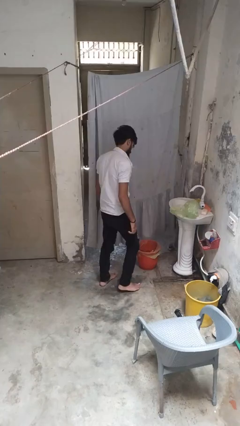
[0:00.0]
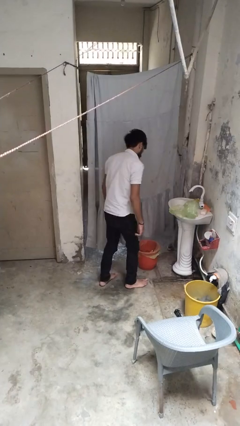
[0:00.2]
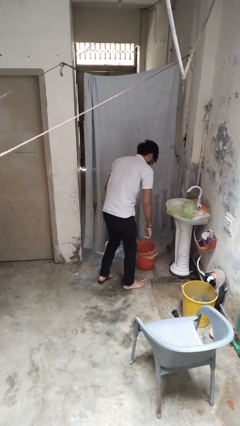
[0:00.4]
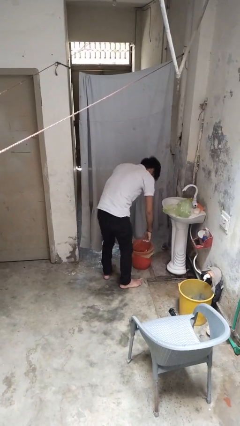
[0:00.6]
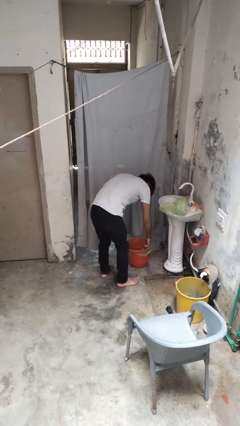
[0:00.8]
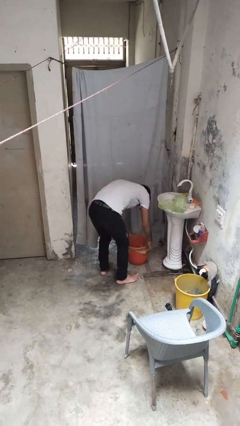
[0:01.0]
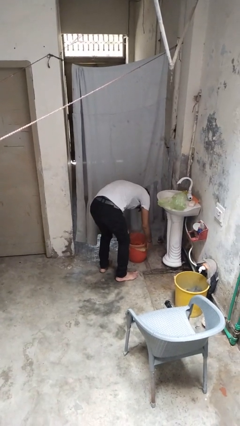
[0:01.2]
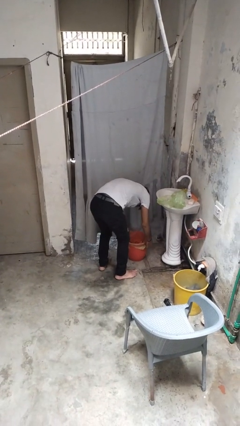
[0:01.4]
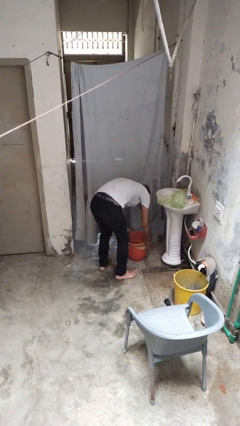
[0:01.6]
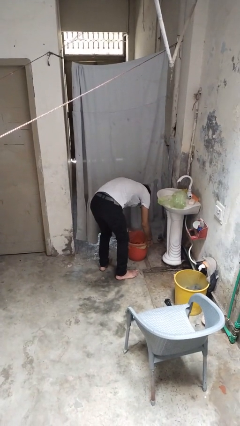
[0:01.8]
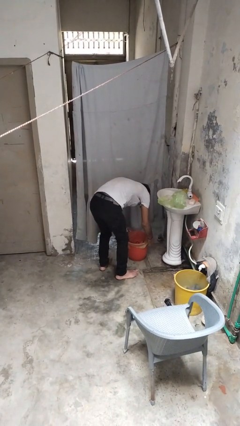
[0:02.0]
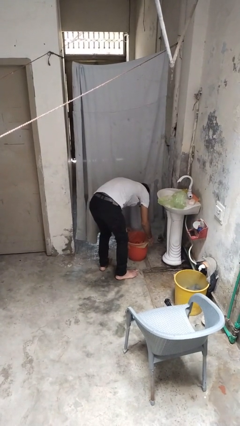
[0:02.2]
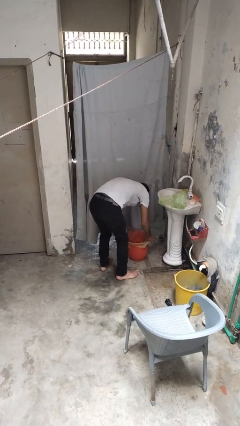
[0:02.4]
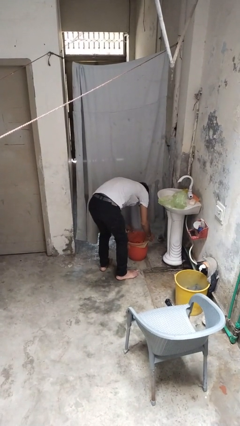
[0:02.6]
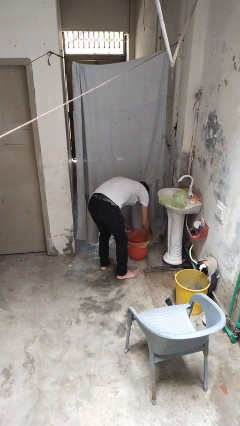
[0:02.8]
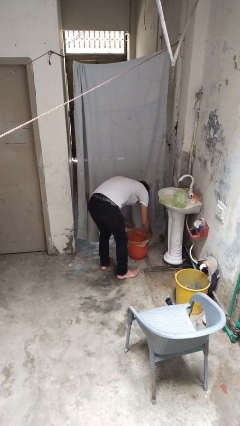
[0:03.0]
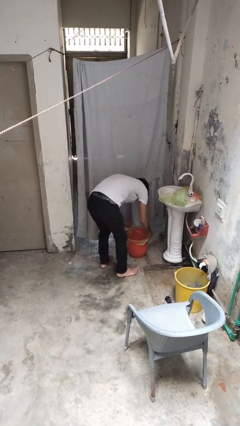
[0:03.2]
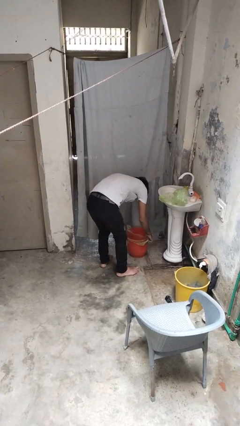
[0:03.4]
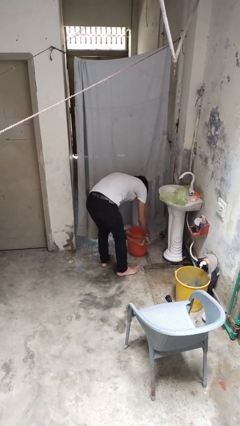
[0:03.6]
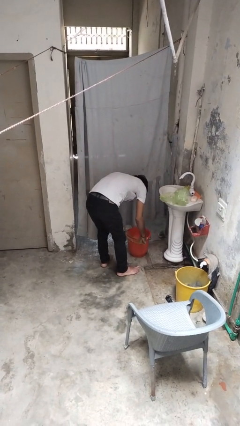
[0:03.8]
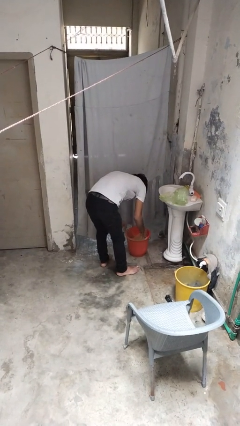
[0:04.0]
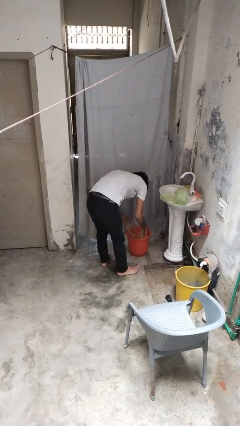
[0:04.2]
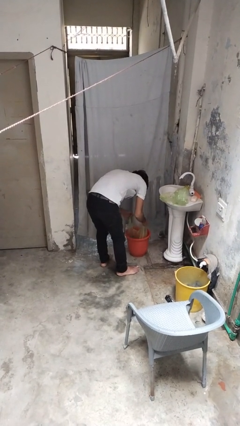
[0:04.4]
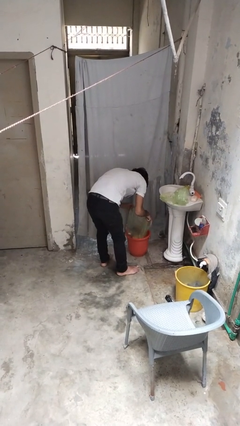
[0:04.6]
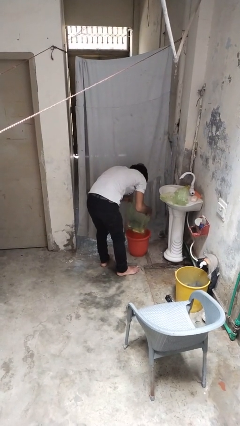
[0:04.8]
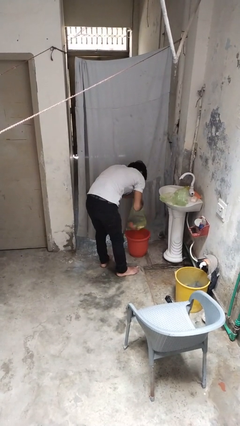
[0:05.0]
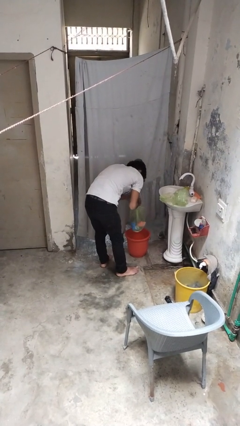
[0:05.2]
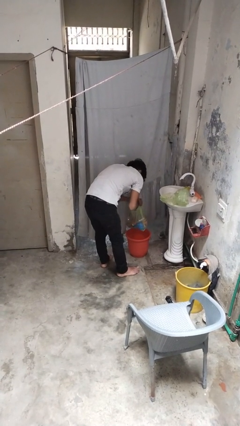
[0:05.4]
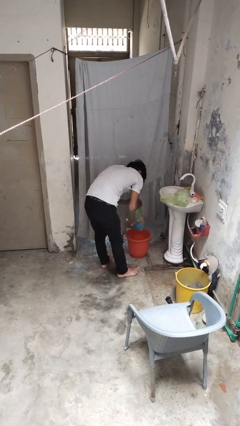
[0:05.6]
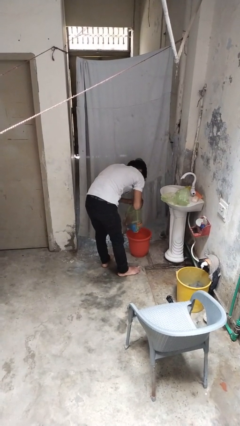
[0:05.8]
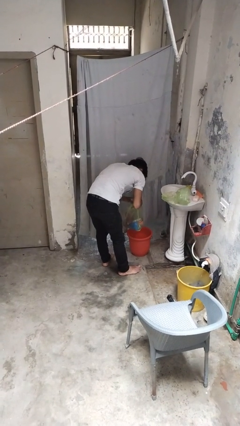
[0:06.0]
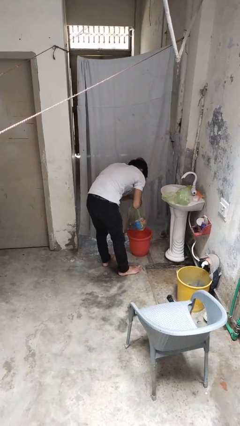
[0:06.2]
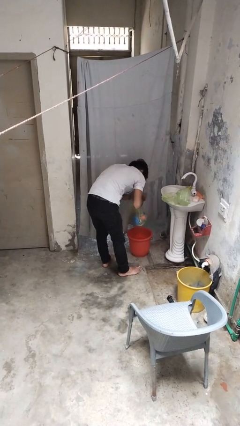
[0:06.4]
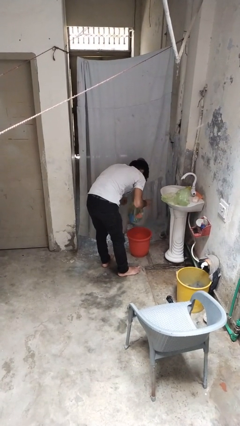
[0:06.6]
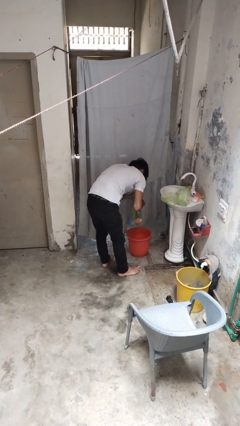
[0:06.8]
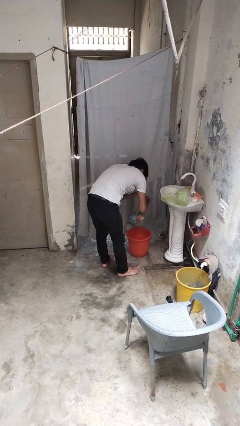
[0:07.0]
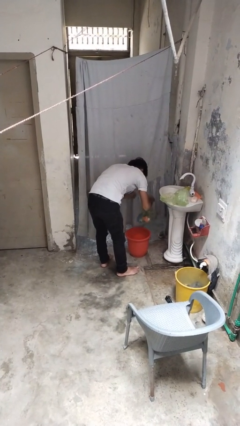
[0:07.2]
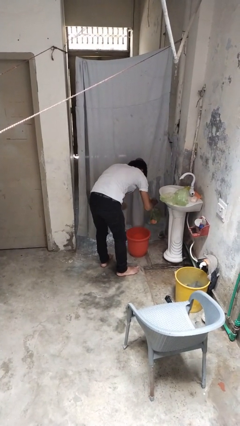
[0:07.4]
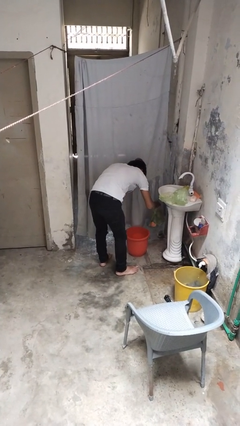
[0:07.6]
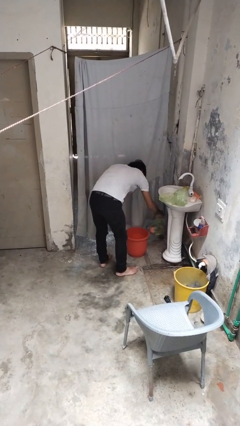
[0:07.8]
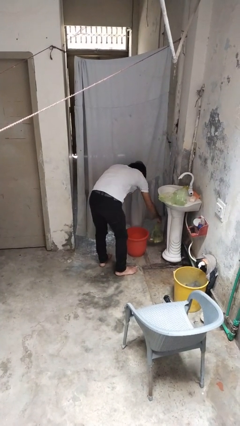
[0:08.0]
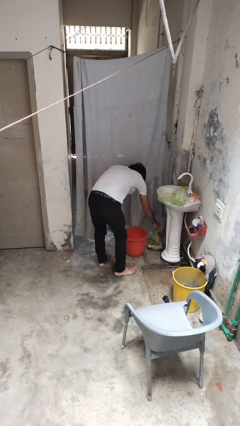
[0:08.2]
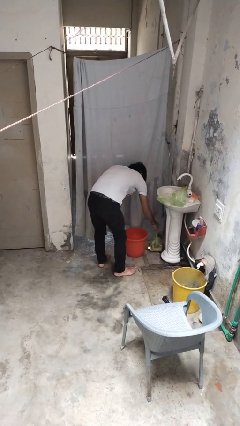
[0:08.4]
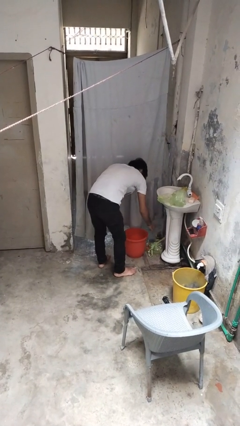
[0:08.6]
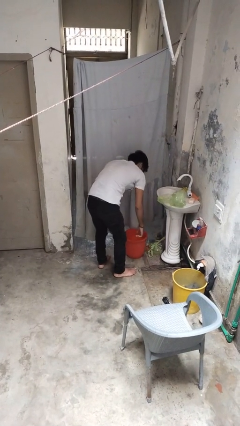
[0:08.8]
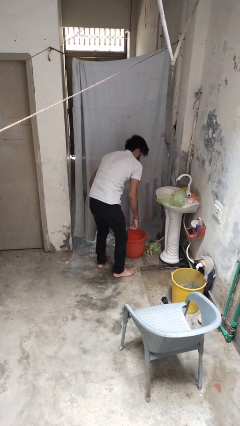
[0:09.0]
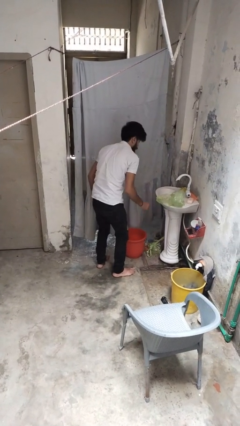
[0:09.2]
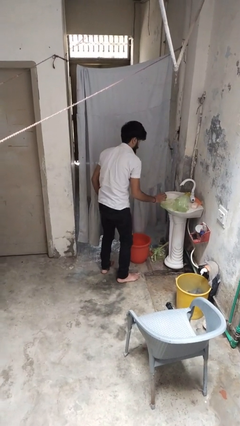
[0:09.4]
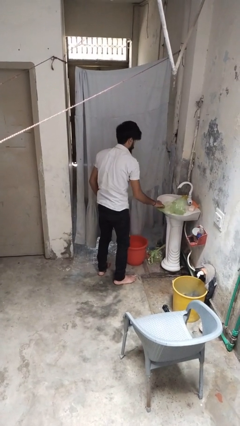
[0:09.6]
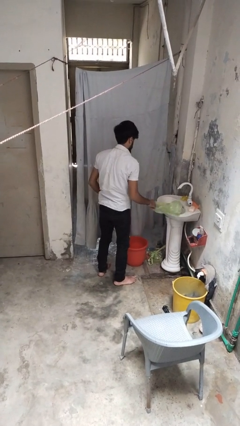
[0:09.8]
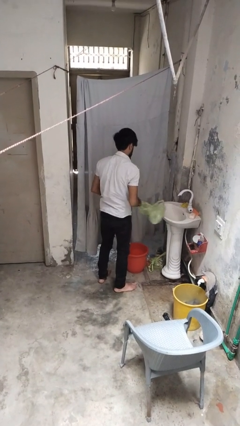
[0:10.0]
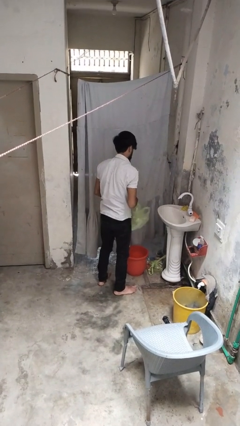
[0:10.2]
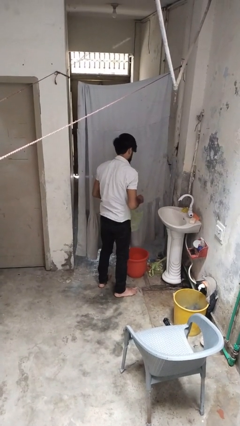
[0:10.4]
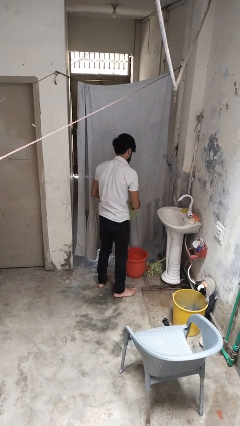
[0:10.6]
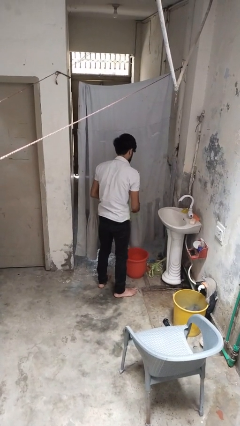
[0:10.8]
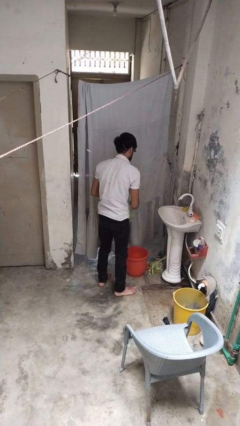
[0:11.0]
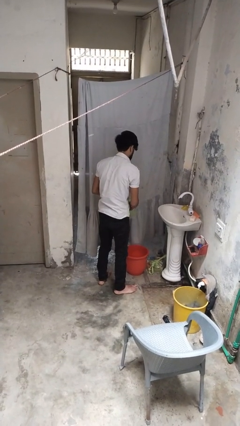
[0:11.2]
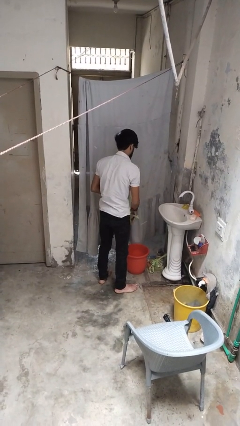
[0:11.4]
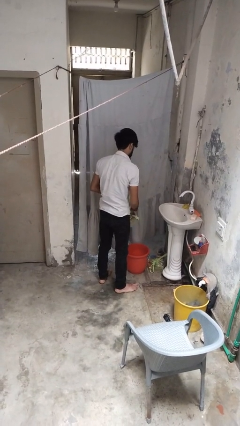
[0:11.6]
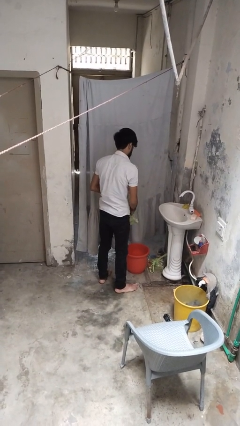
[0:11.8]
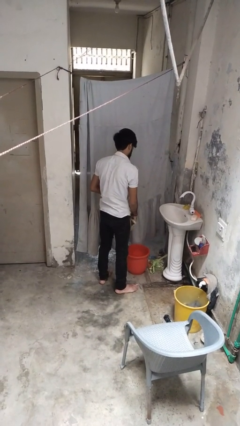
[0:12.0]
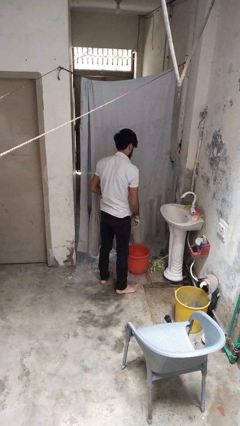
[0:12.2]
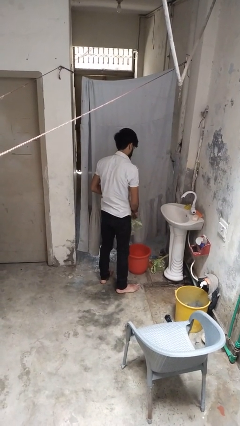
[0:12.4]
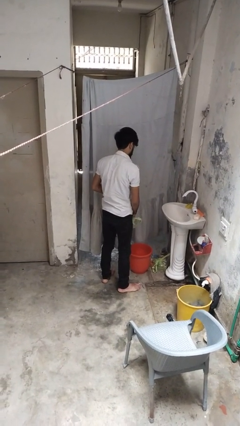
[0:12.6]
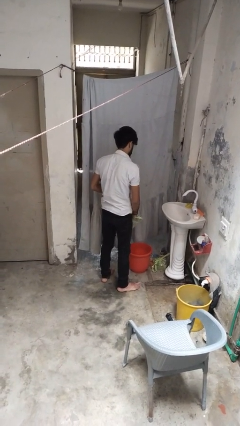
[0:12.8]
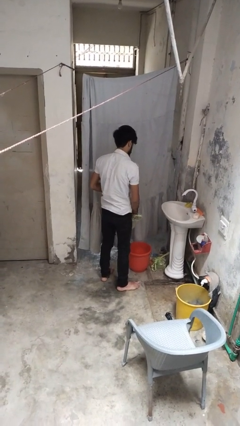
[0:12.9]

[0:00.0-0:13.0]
person removes trashbag from trashcan

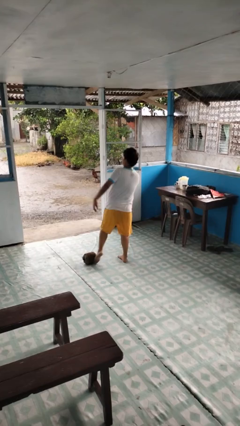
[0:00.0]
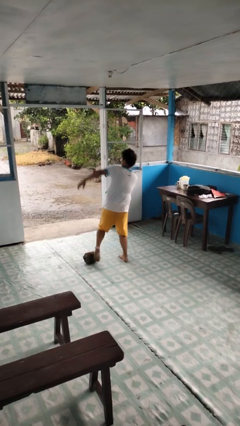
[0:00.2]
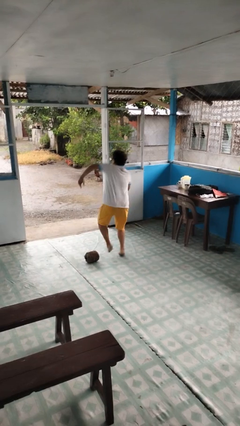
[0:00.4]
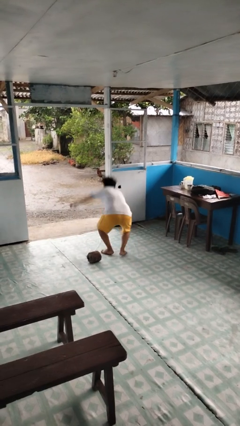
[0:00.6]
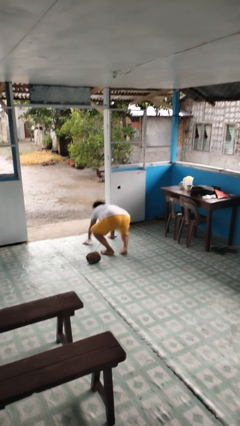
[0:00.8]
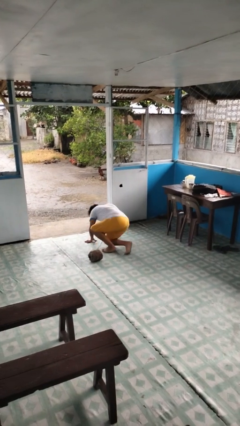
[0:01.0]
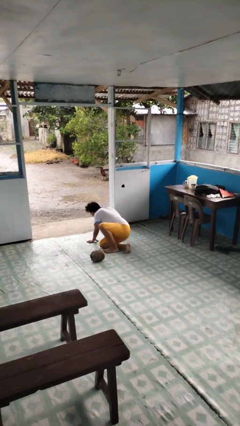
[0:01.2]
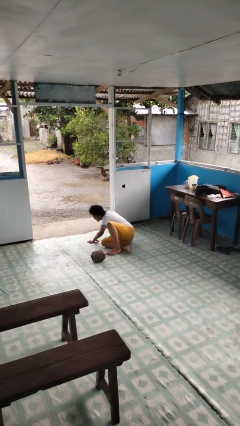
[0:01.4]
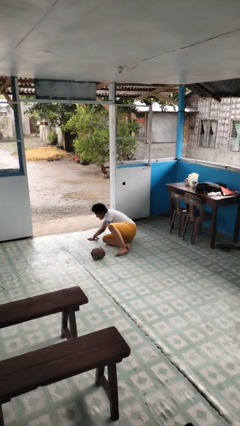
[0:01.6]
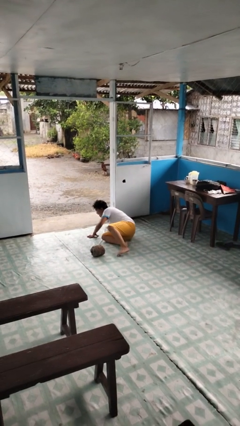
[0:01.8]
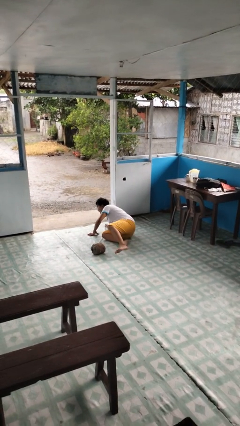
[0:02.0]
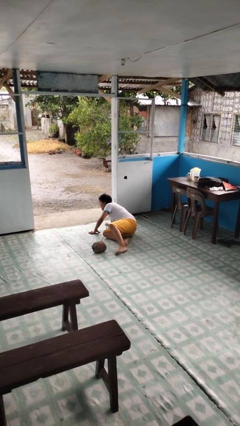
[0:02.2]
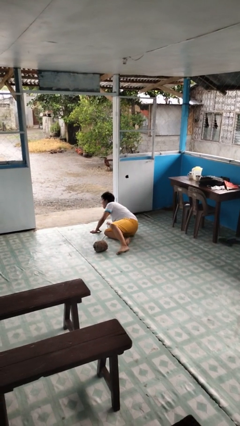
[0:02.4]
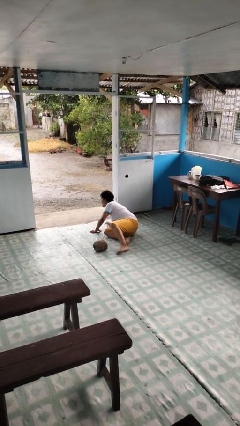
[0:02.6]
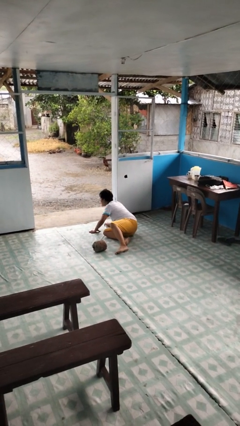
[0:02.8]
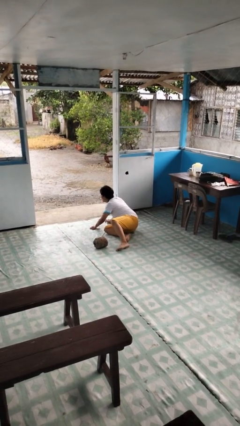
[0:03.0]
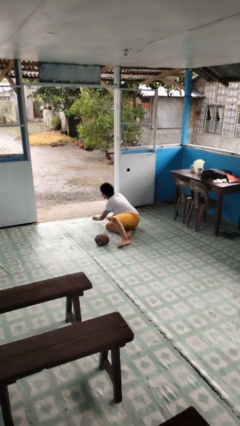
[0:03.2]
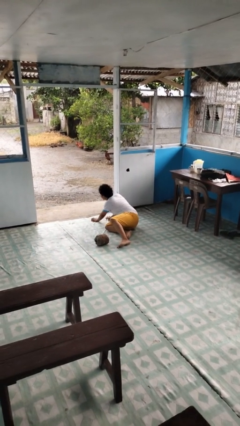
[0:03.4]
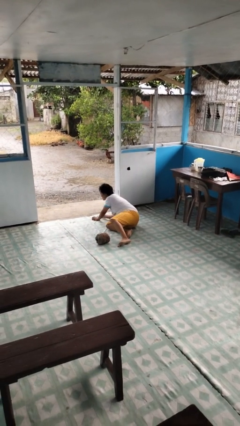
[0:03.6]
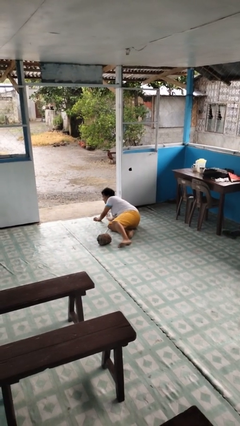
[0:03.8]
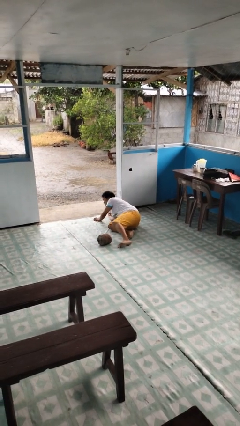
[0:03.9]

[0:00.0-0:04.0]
person trips on object on floor

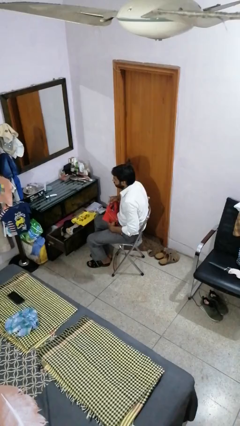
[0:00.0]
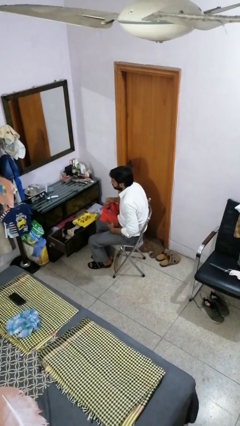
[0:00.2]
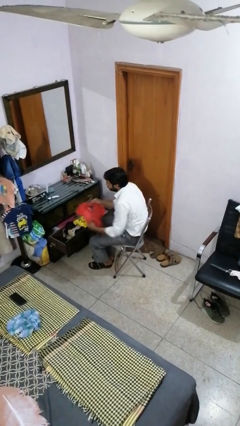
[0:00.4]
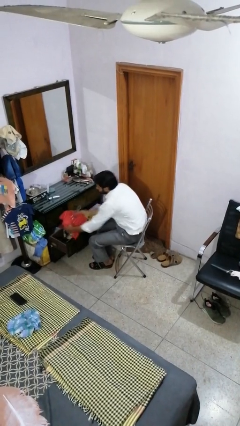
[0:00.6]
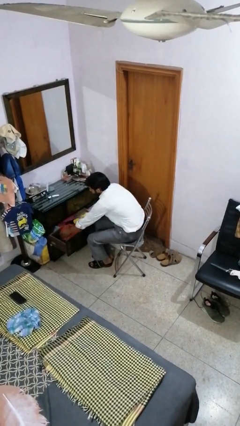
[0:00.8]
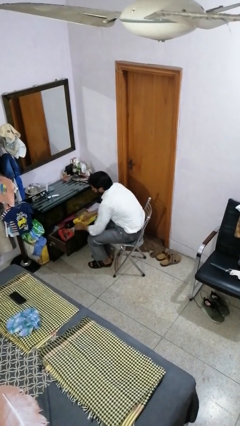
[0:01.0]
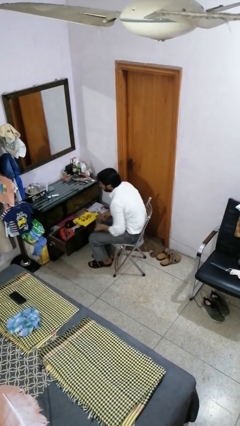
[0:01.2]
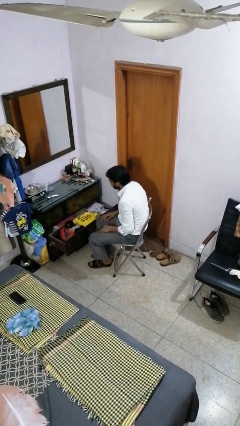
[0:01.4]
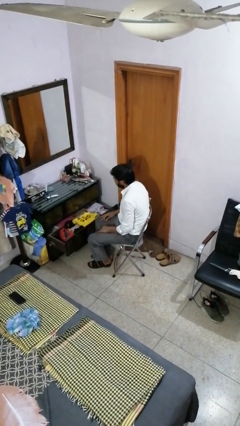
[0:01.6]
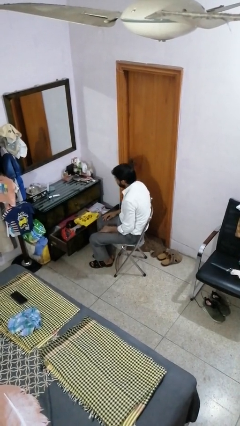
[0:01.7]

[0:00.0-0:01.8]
person puts clothes into dresser
